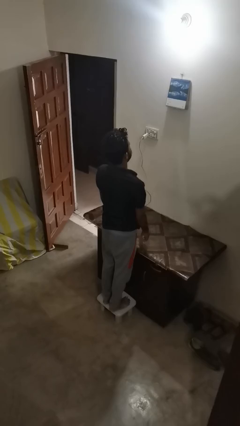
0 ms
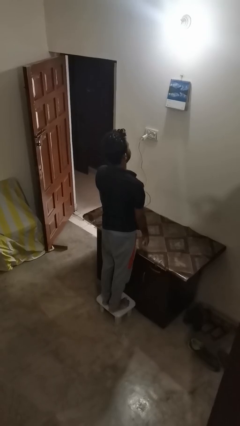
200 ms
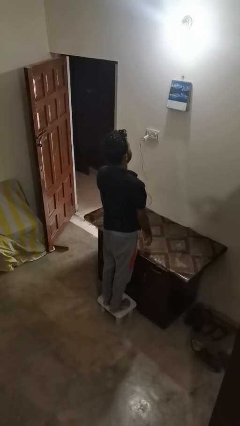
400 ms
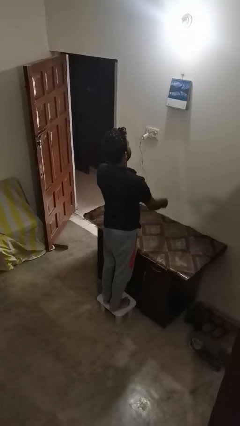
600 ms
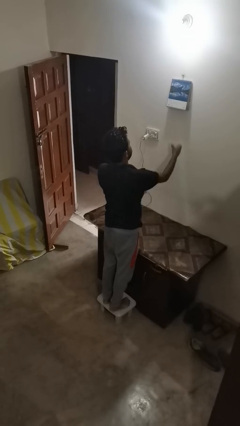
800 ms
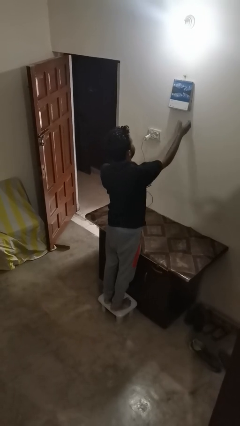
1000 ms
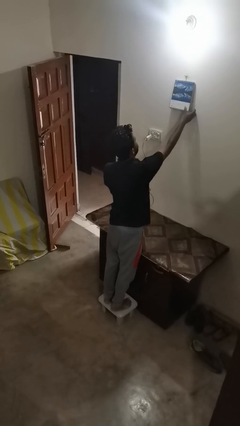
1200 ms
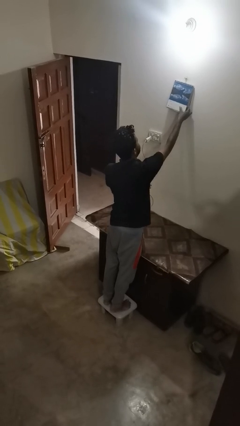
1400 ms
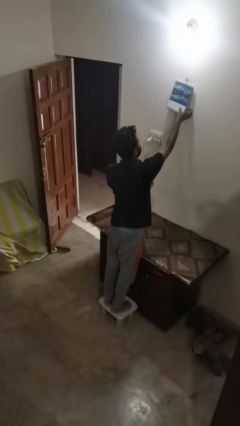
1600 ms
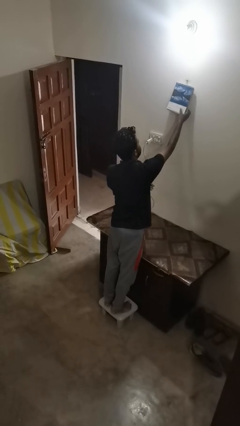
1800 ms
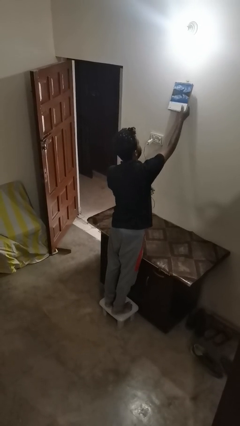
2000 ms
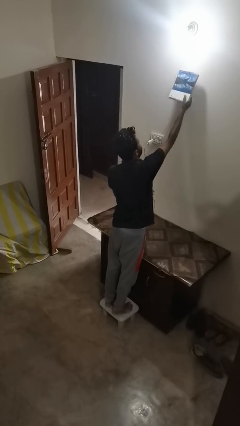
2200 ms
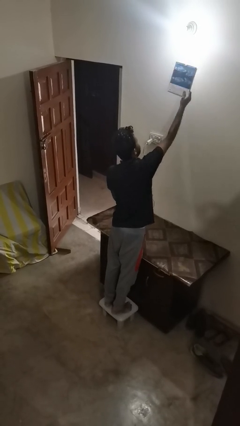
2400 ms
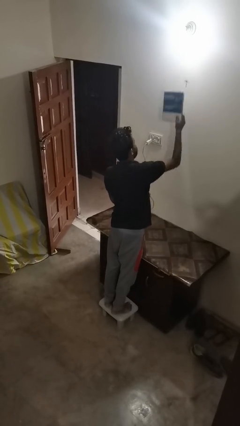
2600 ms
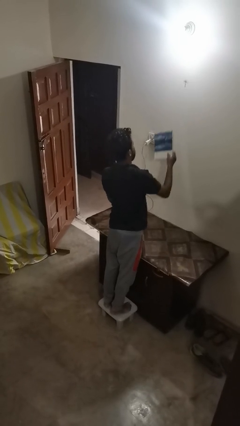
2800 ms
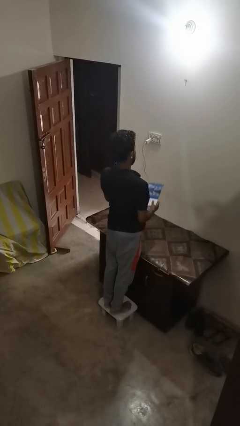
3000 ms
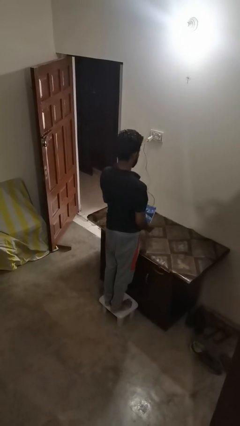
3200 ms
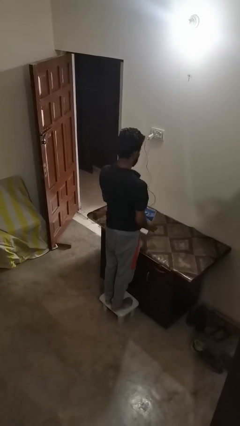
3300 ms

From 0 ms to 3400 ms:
person takes down picture frame

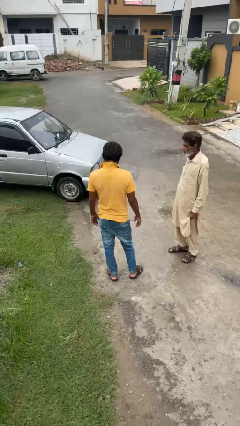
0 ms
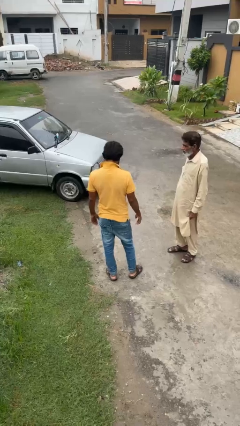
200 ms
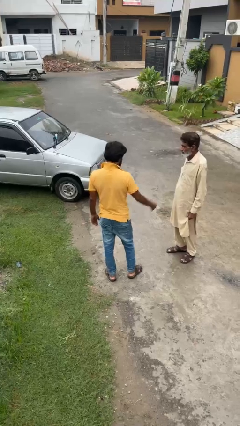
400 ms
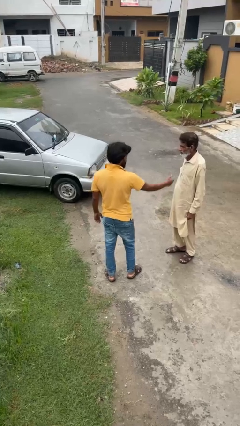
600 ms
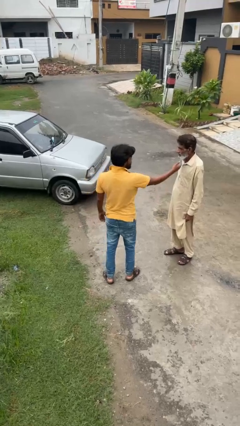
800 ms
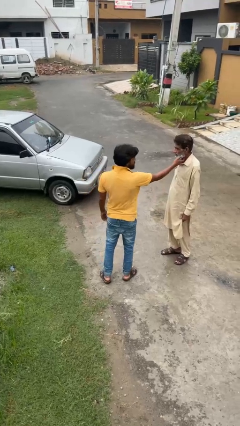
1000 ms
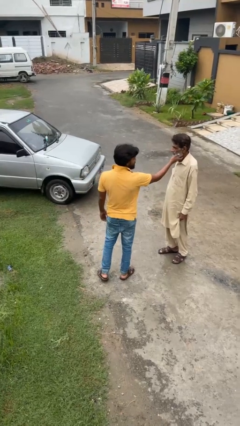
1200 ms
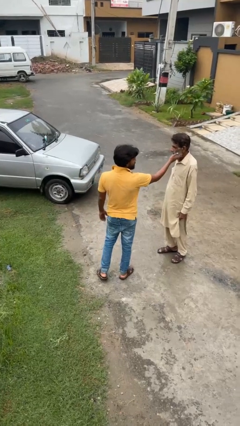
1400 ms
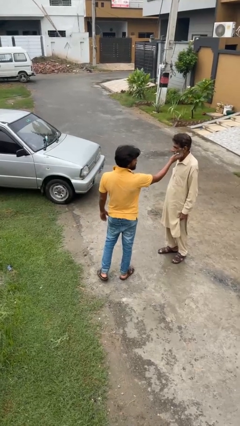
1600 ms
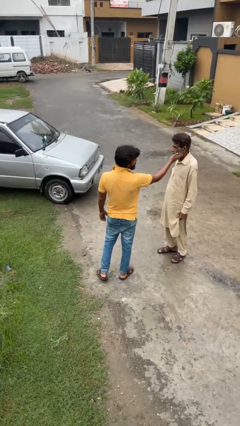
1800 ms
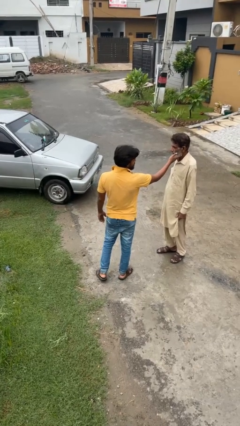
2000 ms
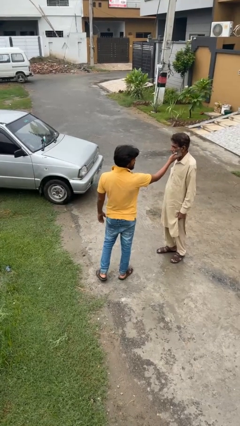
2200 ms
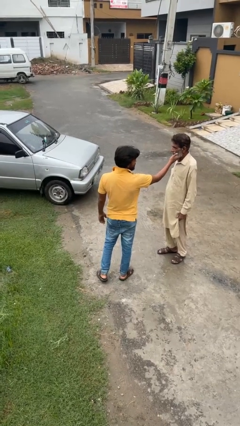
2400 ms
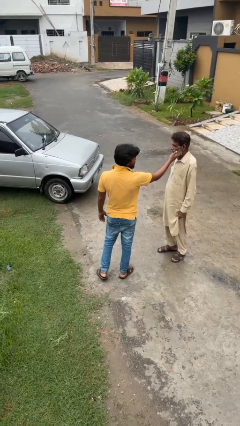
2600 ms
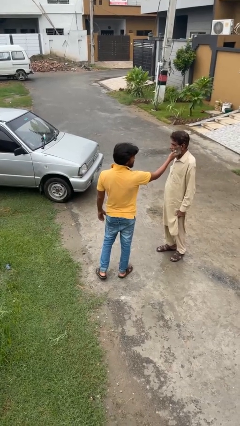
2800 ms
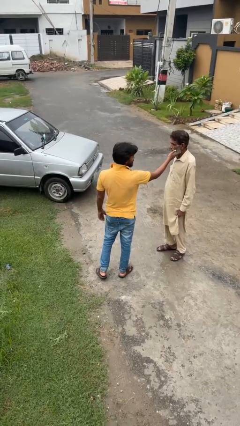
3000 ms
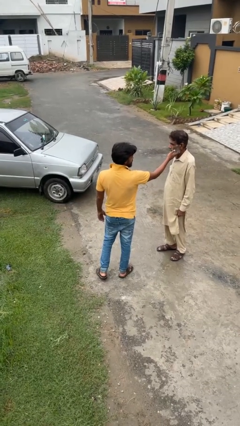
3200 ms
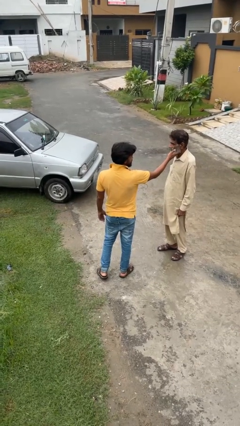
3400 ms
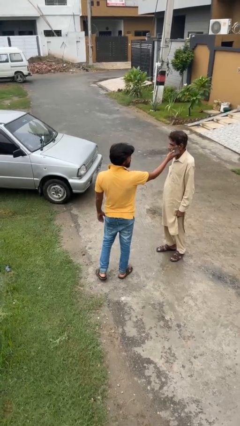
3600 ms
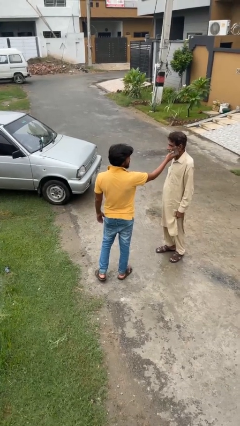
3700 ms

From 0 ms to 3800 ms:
person touches face of person

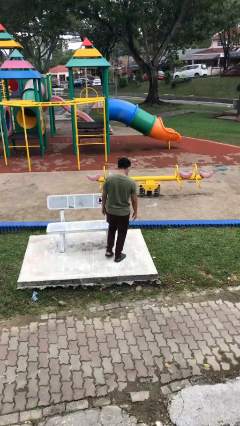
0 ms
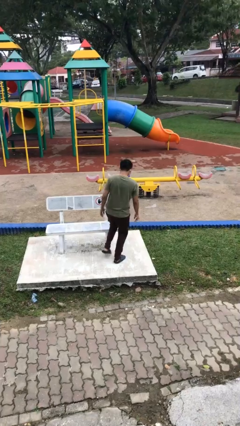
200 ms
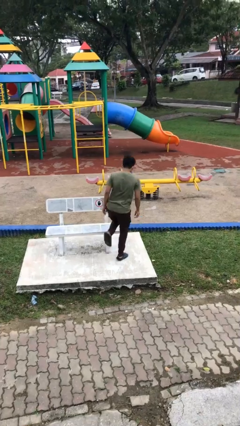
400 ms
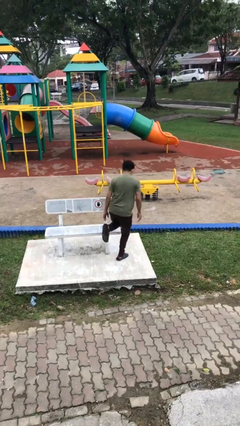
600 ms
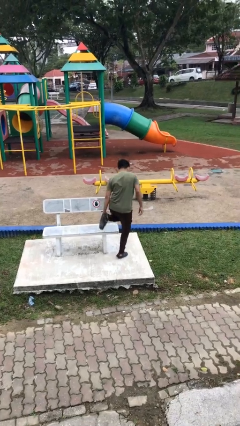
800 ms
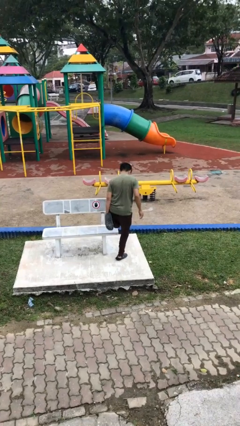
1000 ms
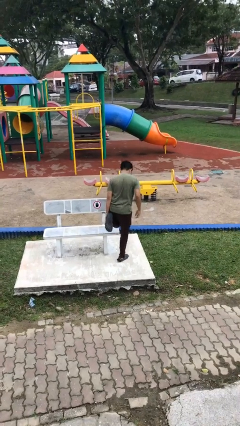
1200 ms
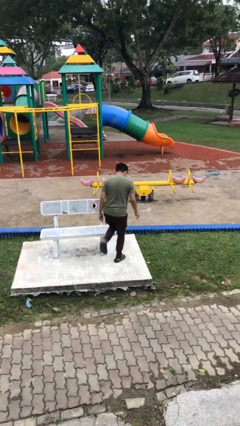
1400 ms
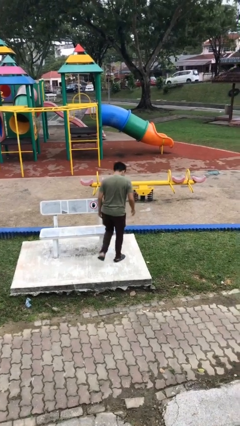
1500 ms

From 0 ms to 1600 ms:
person stubs toe

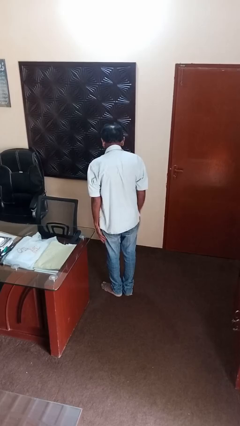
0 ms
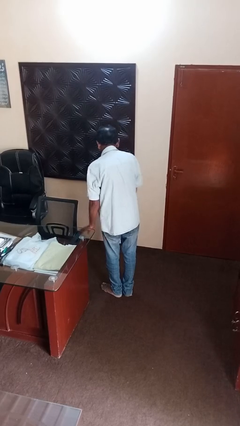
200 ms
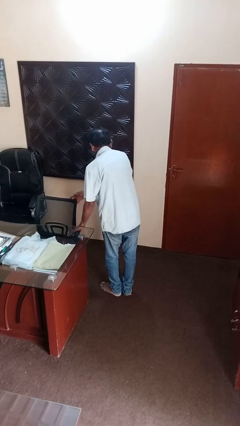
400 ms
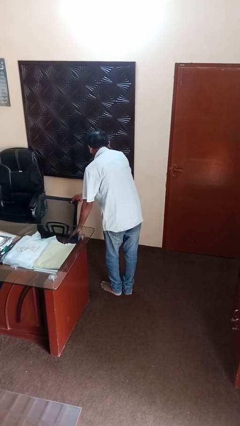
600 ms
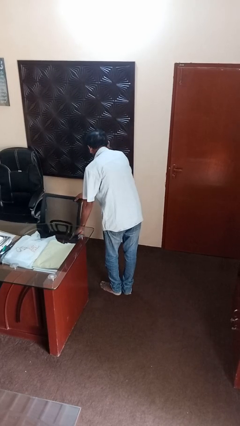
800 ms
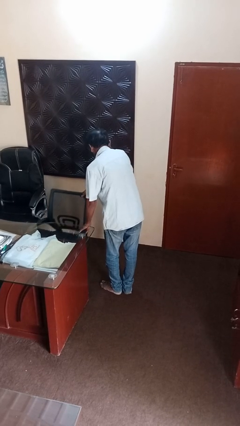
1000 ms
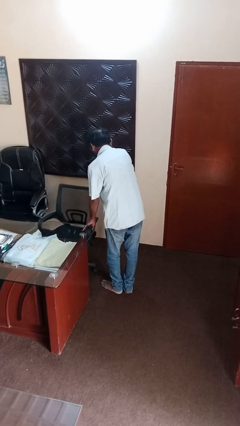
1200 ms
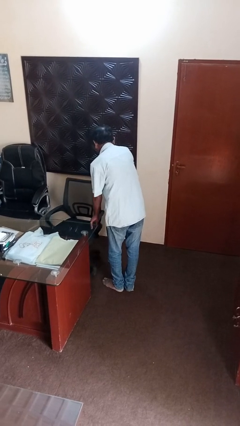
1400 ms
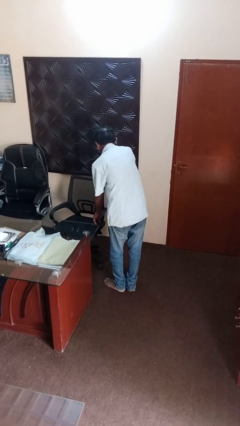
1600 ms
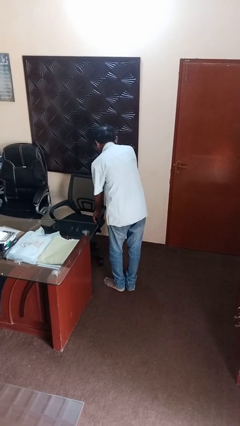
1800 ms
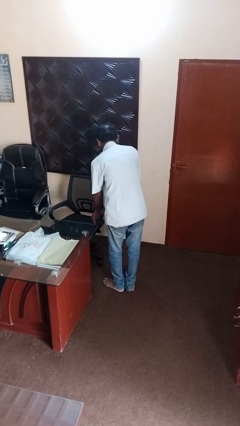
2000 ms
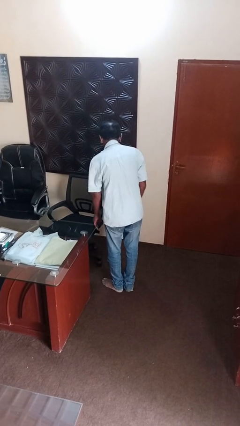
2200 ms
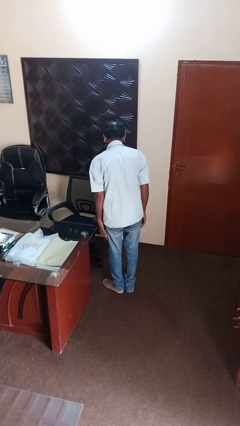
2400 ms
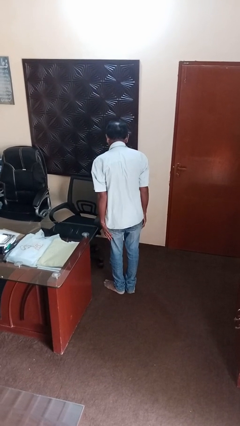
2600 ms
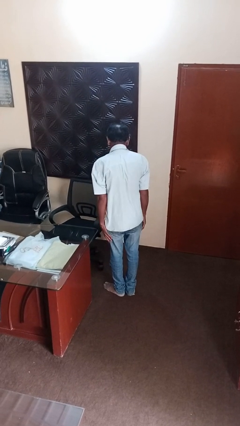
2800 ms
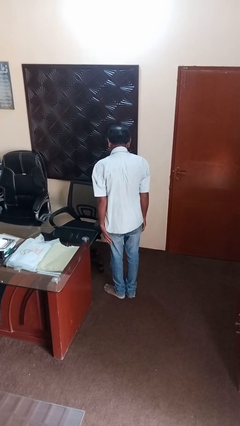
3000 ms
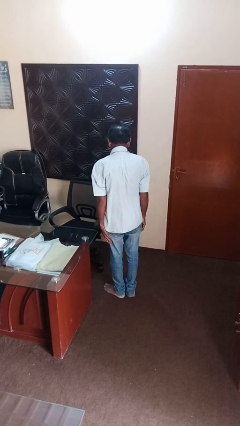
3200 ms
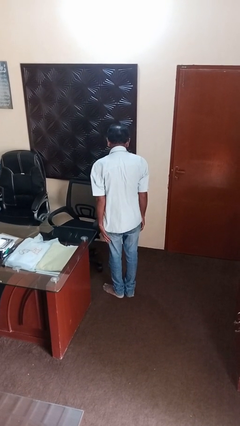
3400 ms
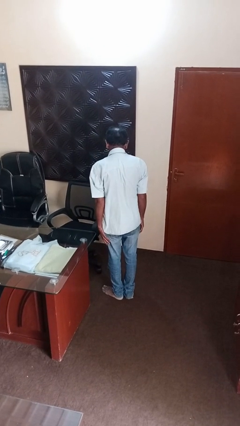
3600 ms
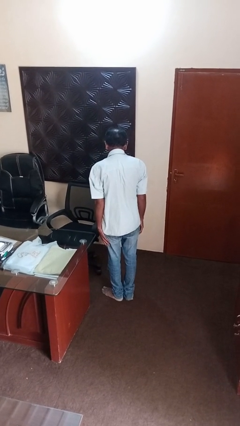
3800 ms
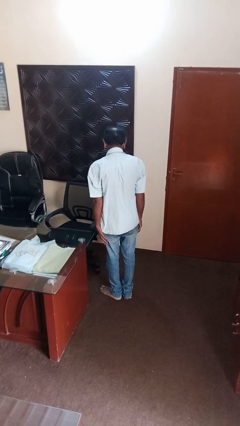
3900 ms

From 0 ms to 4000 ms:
person pulls out chair

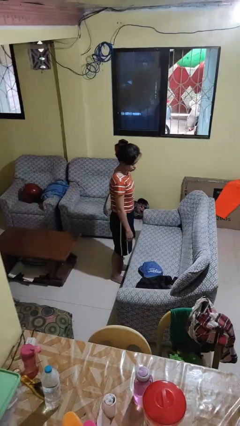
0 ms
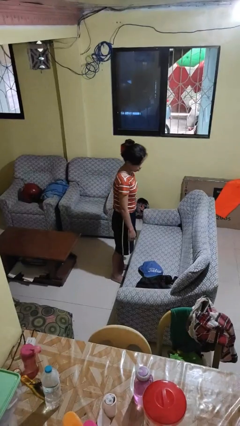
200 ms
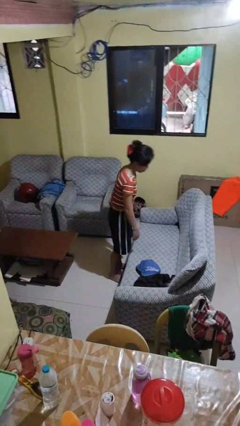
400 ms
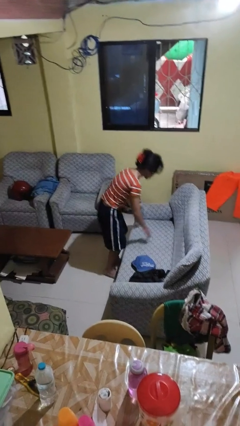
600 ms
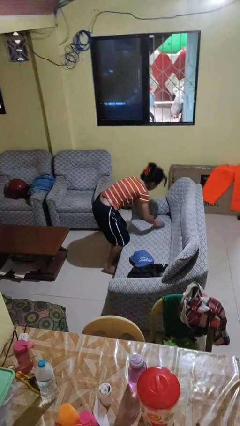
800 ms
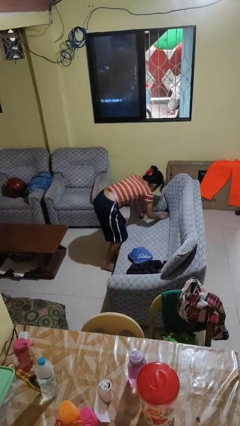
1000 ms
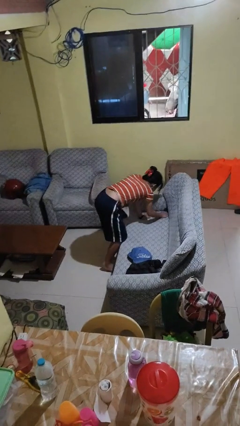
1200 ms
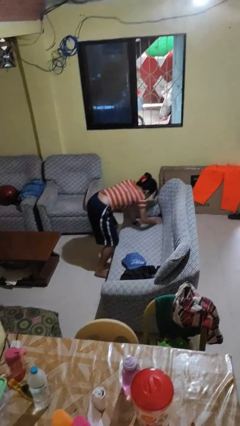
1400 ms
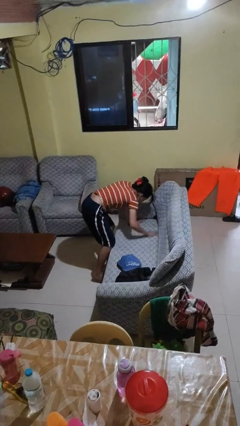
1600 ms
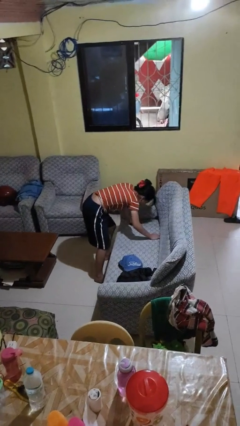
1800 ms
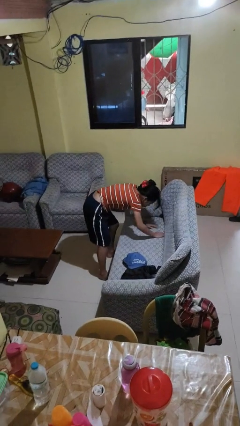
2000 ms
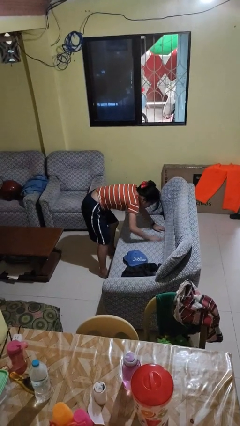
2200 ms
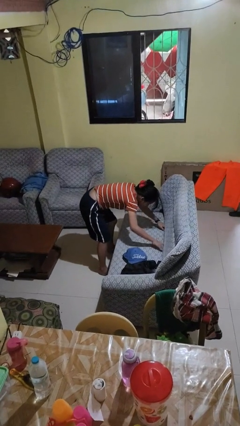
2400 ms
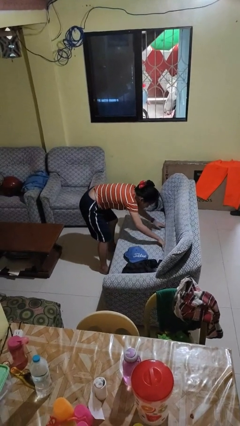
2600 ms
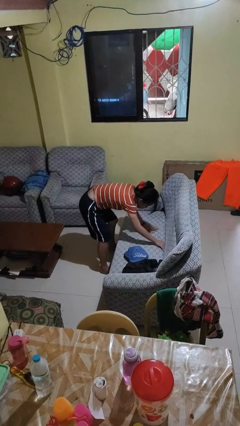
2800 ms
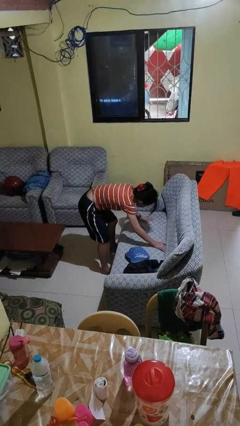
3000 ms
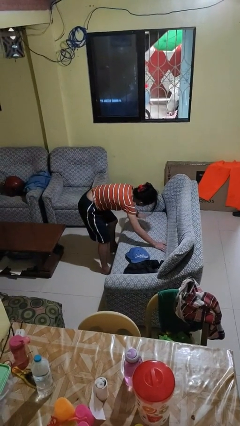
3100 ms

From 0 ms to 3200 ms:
person searches in couch

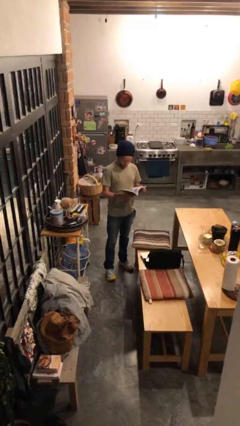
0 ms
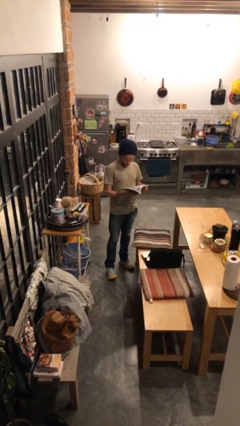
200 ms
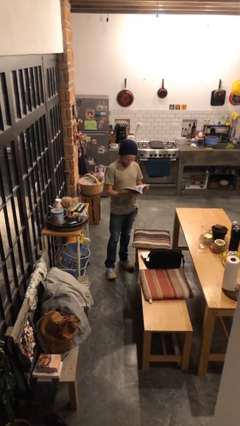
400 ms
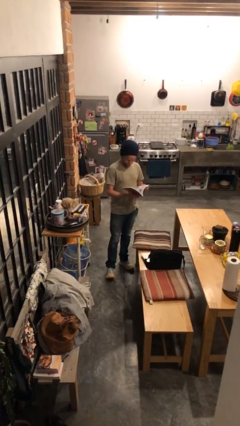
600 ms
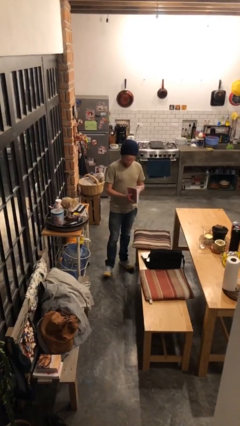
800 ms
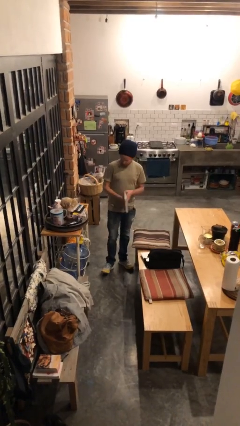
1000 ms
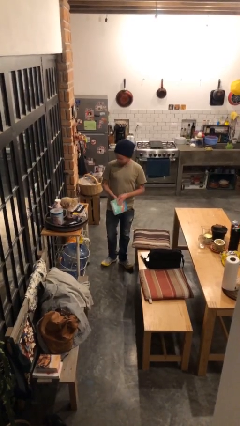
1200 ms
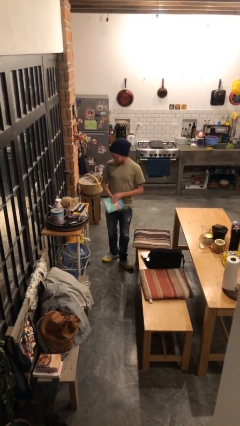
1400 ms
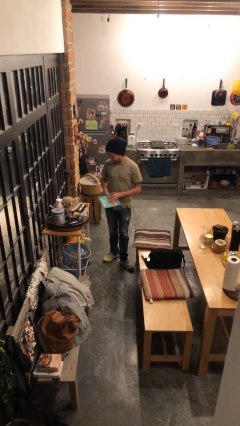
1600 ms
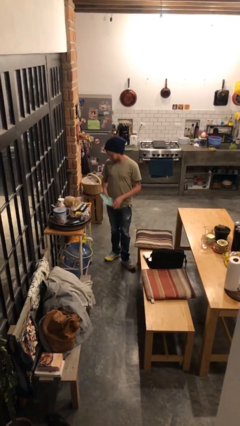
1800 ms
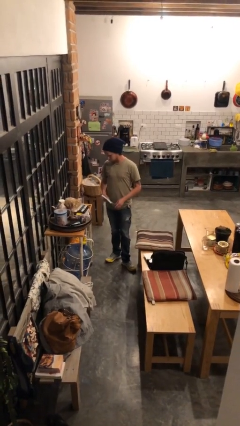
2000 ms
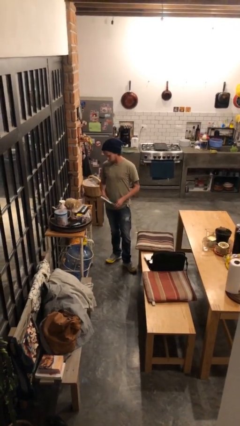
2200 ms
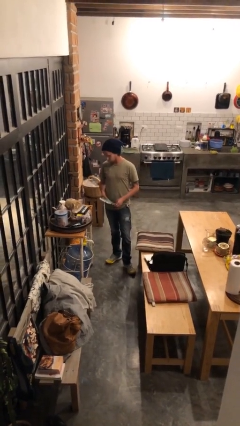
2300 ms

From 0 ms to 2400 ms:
person reads document
